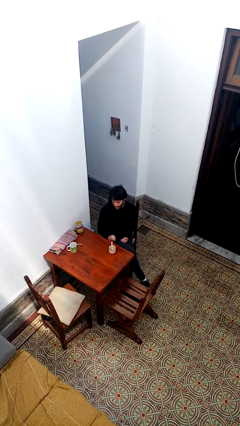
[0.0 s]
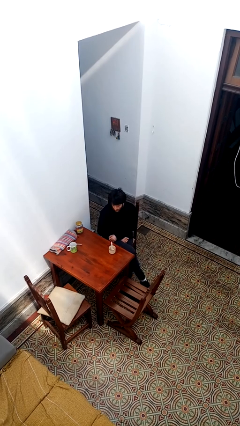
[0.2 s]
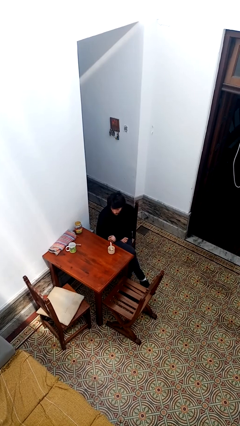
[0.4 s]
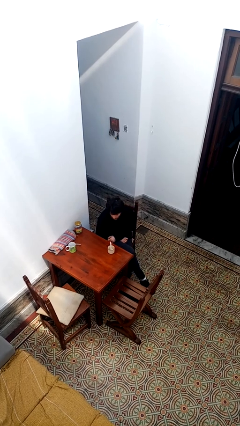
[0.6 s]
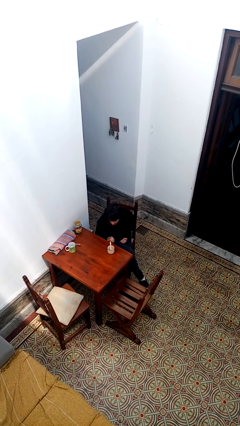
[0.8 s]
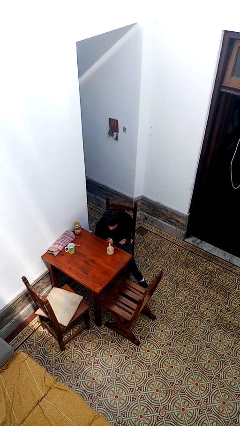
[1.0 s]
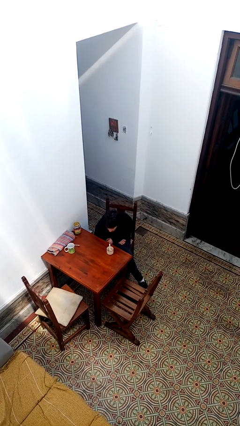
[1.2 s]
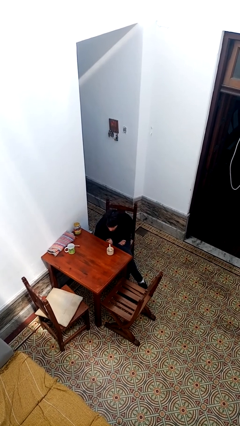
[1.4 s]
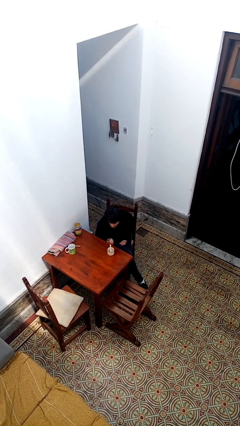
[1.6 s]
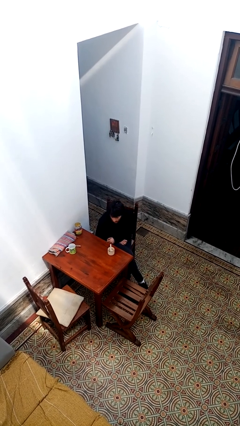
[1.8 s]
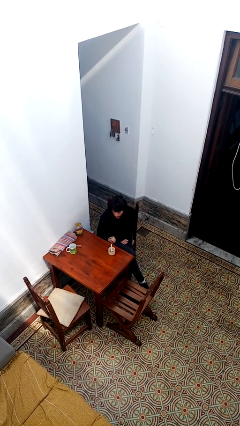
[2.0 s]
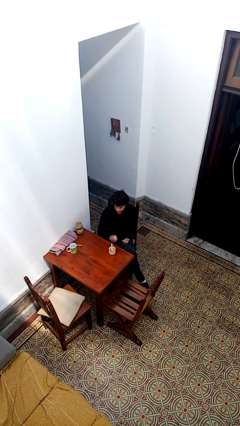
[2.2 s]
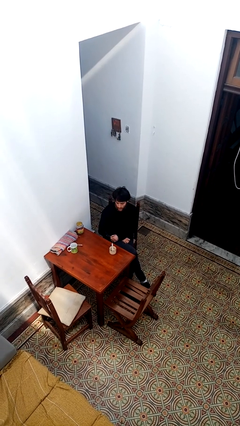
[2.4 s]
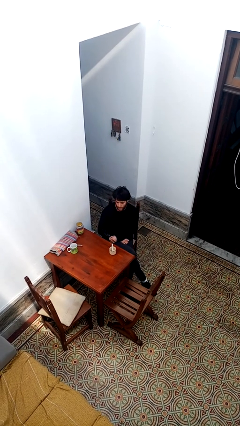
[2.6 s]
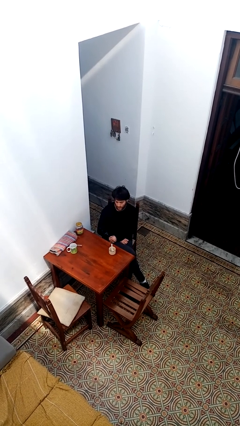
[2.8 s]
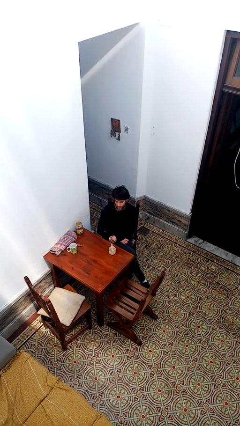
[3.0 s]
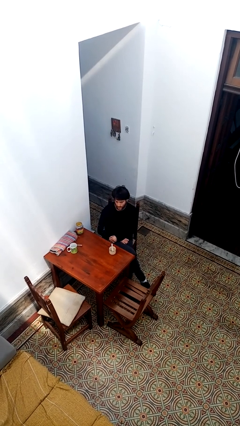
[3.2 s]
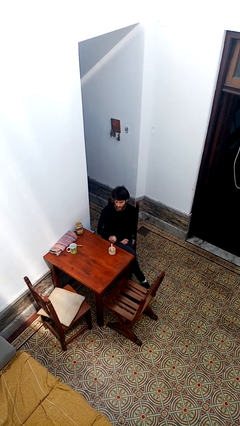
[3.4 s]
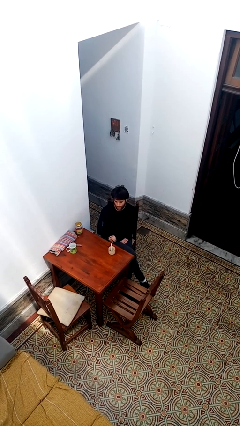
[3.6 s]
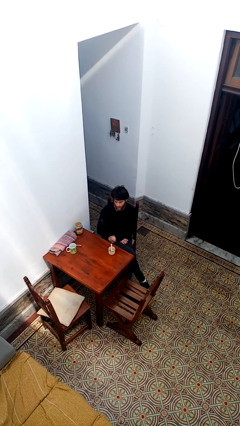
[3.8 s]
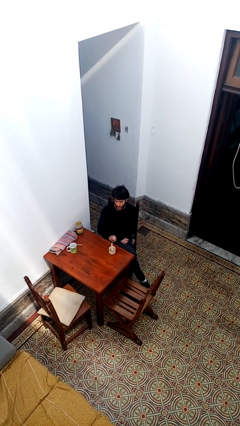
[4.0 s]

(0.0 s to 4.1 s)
person extinguishes candle

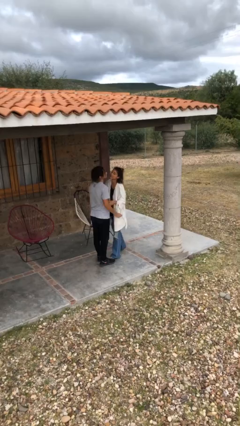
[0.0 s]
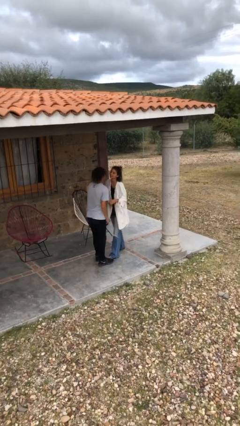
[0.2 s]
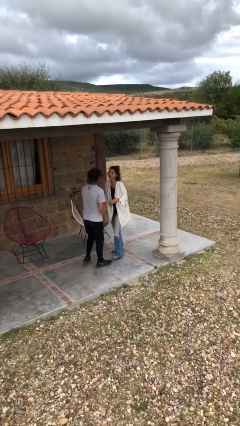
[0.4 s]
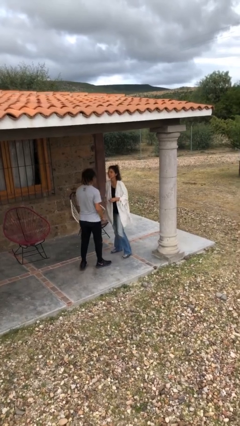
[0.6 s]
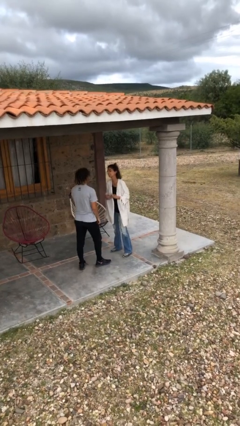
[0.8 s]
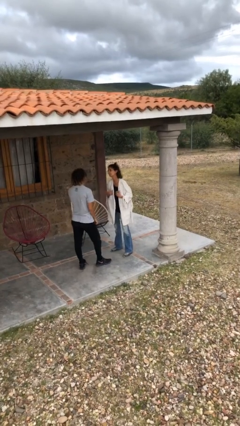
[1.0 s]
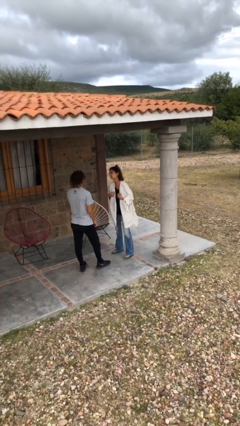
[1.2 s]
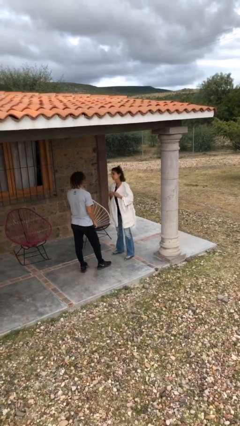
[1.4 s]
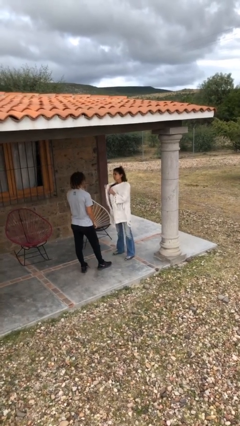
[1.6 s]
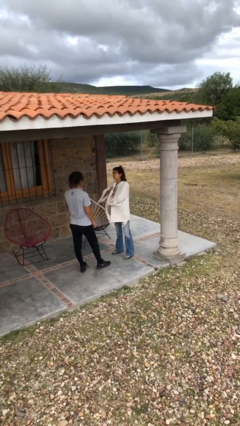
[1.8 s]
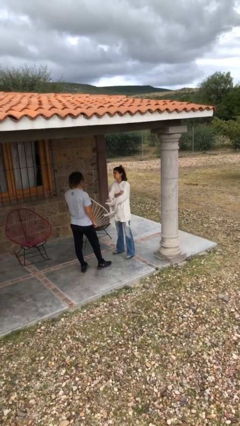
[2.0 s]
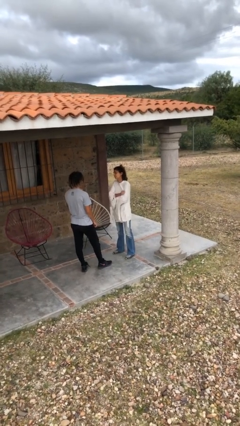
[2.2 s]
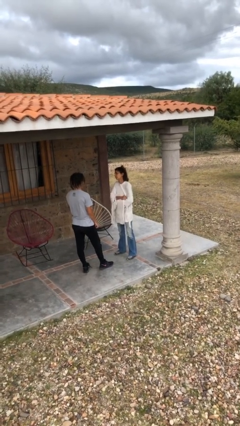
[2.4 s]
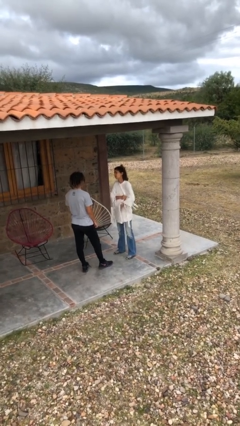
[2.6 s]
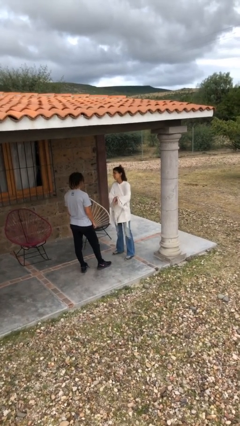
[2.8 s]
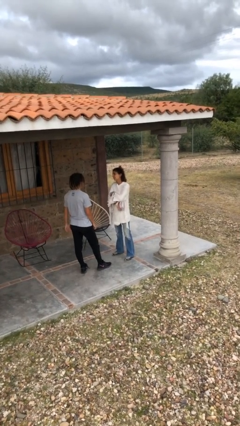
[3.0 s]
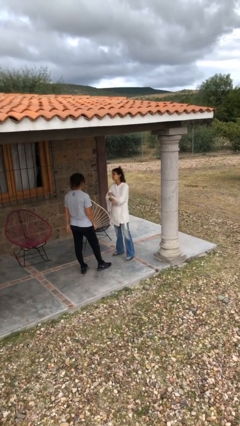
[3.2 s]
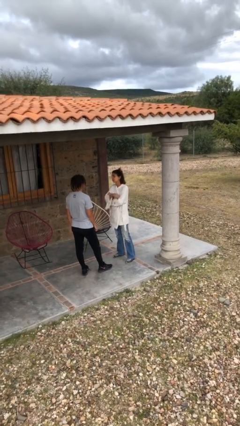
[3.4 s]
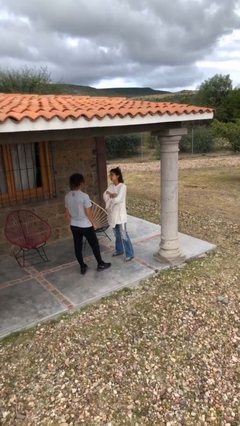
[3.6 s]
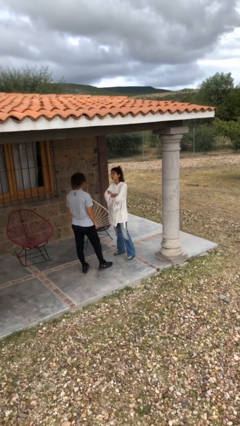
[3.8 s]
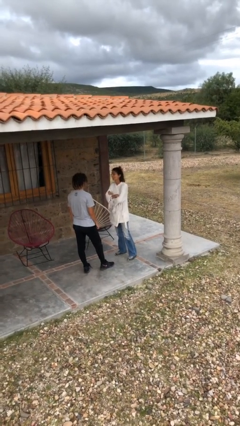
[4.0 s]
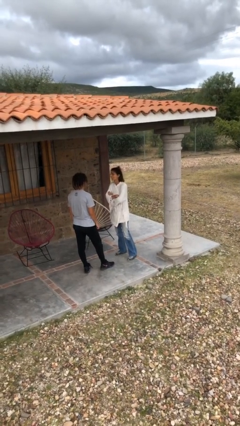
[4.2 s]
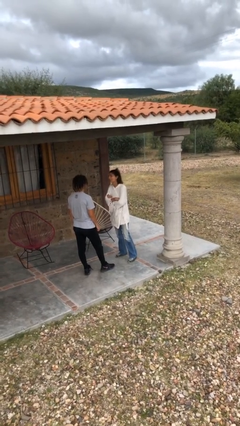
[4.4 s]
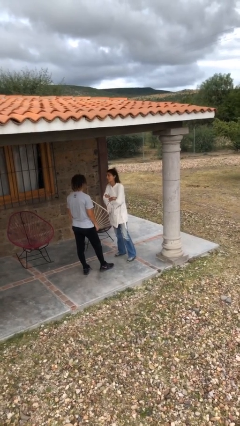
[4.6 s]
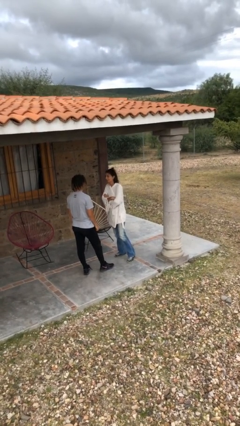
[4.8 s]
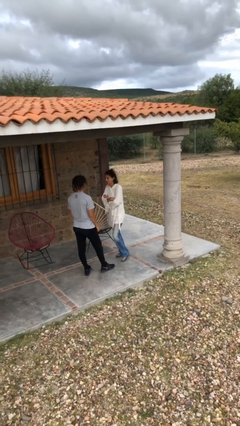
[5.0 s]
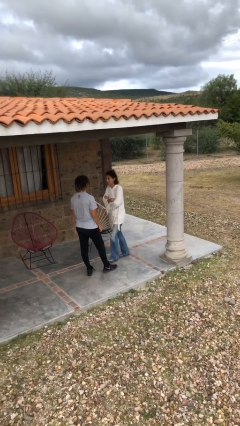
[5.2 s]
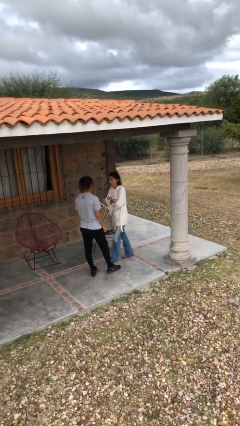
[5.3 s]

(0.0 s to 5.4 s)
person talks to person

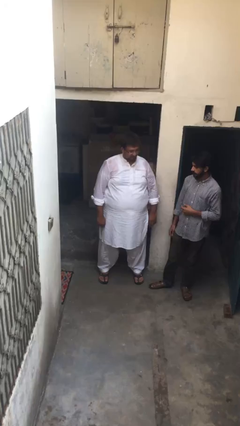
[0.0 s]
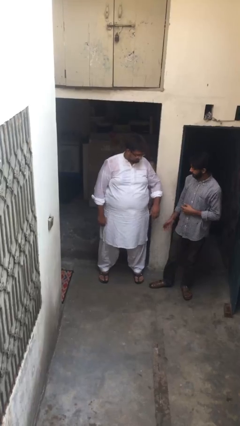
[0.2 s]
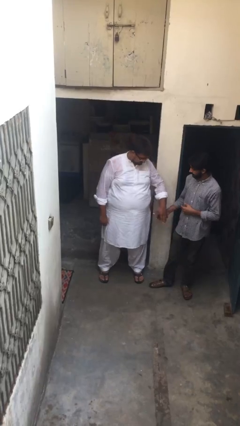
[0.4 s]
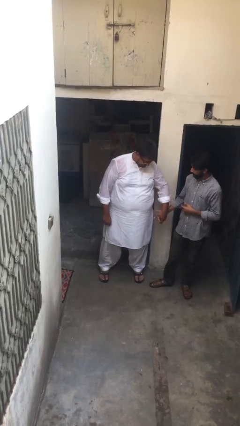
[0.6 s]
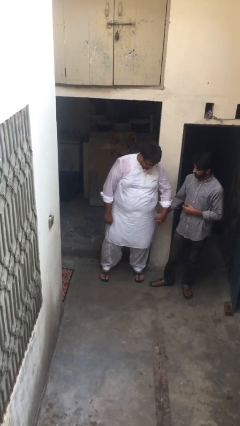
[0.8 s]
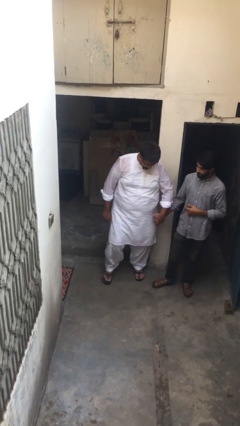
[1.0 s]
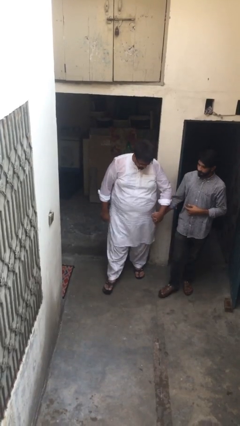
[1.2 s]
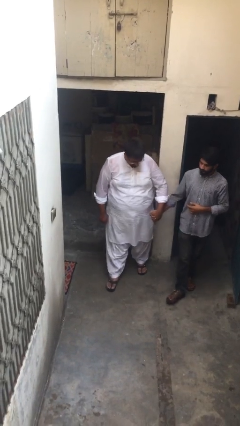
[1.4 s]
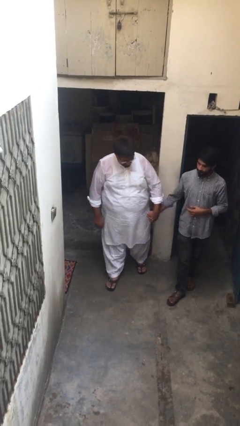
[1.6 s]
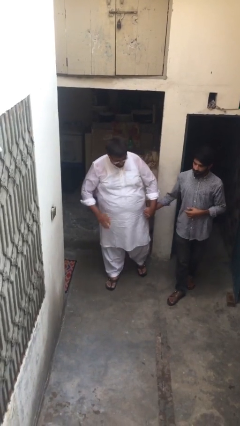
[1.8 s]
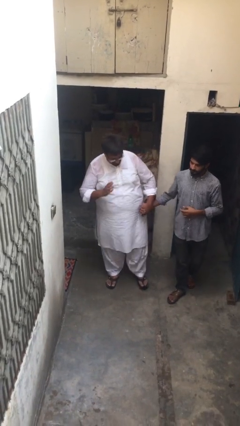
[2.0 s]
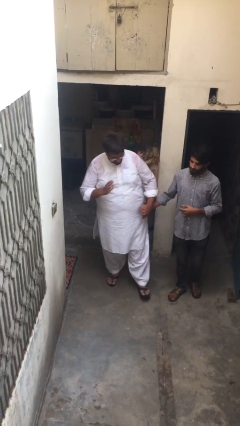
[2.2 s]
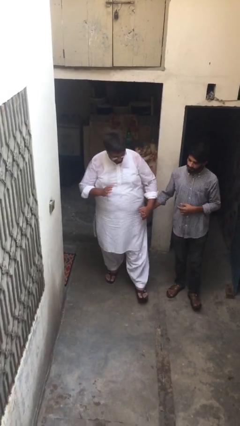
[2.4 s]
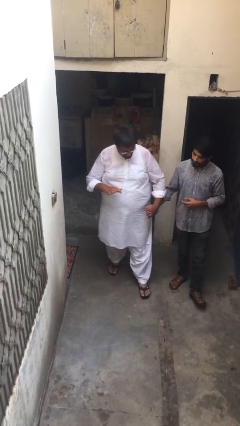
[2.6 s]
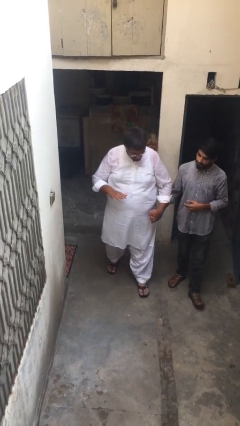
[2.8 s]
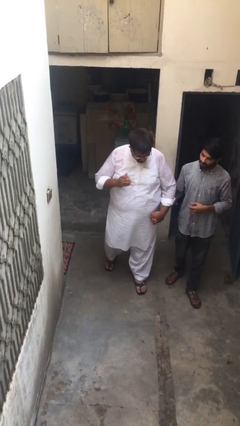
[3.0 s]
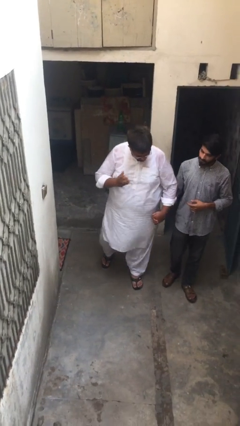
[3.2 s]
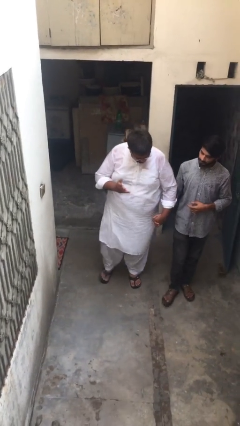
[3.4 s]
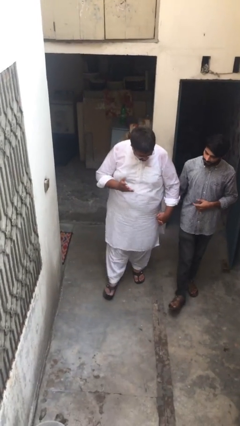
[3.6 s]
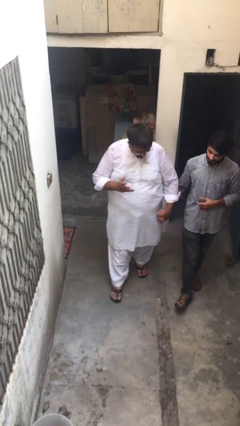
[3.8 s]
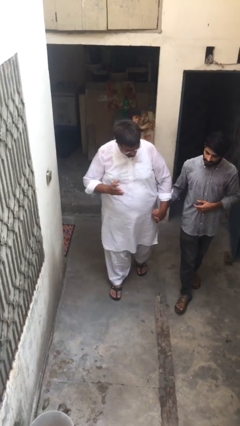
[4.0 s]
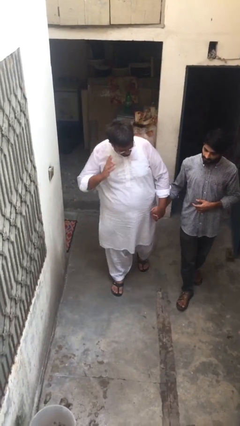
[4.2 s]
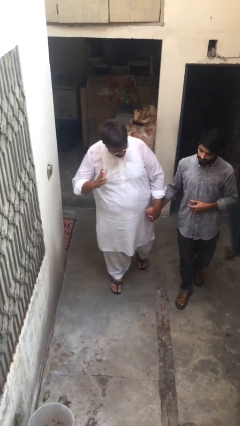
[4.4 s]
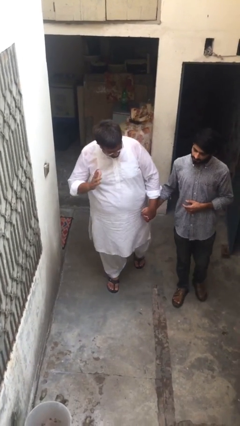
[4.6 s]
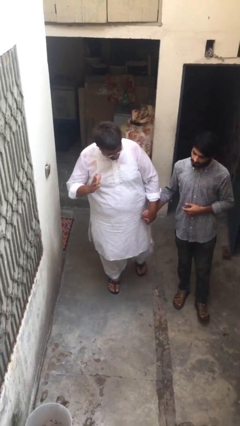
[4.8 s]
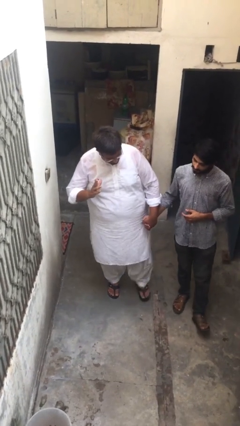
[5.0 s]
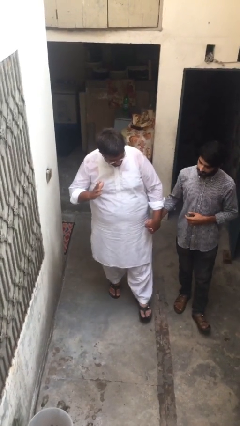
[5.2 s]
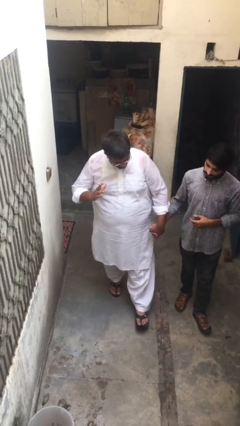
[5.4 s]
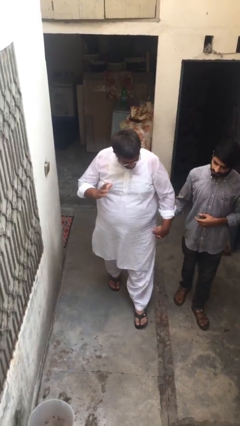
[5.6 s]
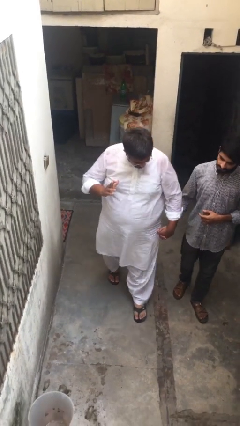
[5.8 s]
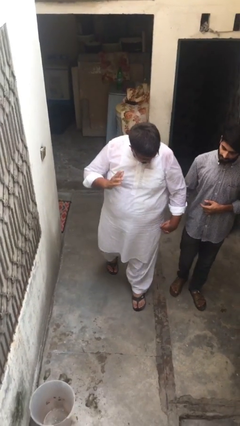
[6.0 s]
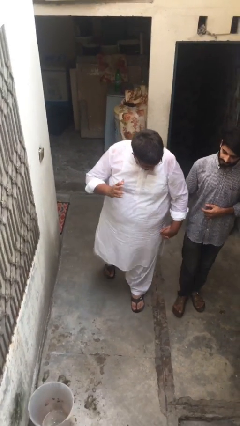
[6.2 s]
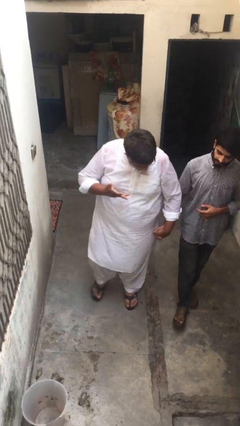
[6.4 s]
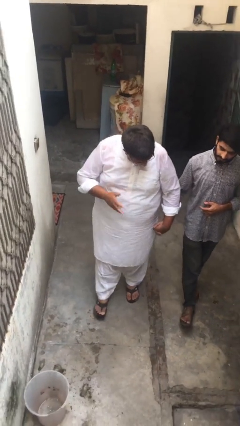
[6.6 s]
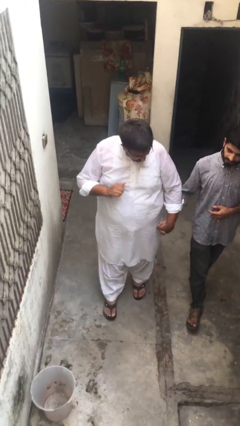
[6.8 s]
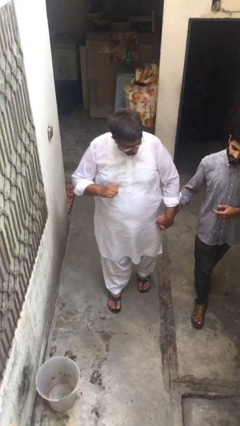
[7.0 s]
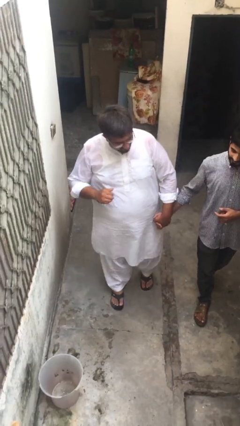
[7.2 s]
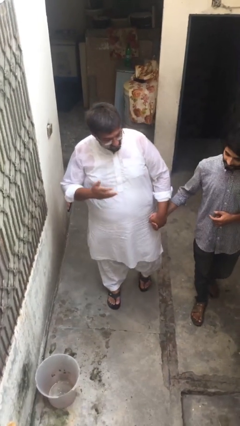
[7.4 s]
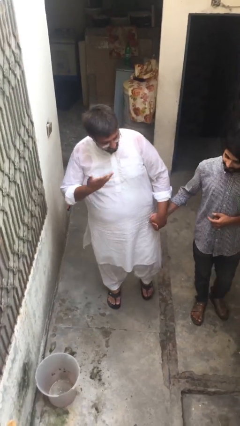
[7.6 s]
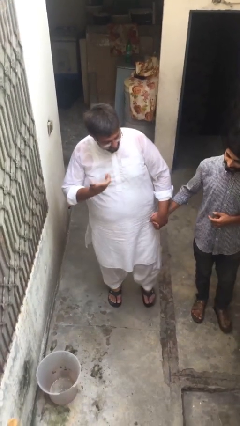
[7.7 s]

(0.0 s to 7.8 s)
person holds hand

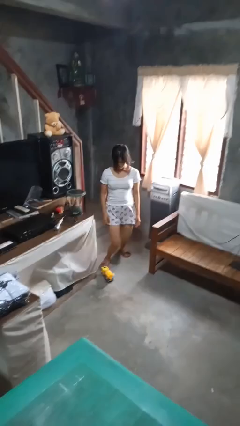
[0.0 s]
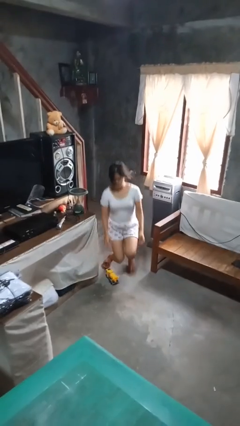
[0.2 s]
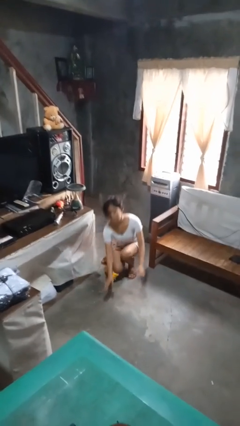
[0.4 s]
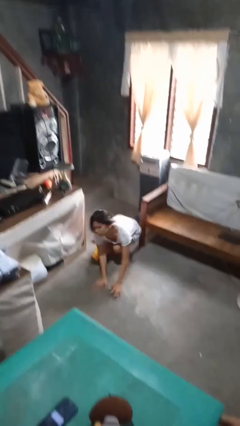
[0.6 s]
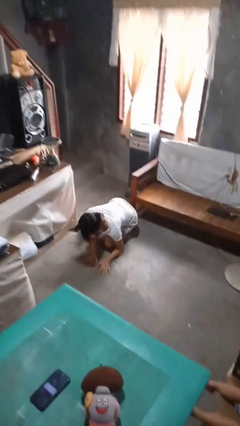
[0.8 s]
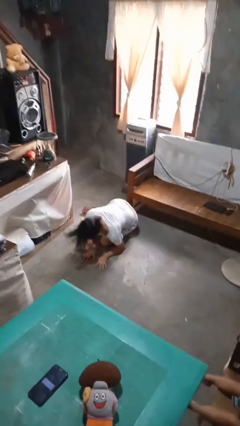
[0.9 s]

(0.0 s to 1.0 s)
person trips on object on floor
